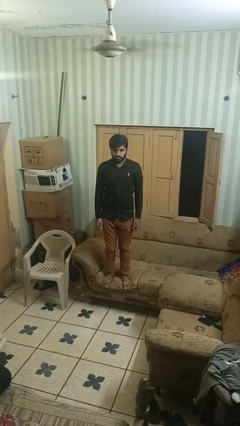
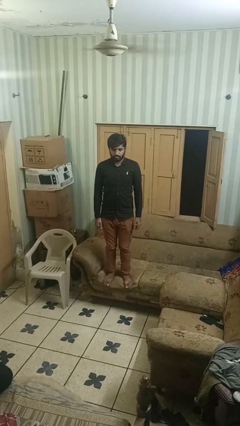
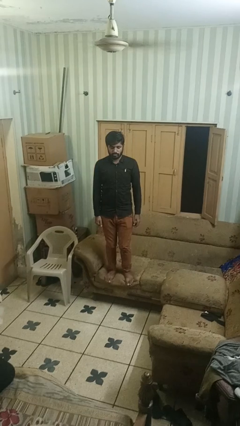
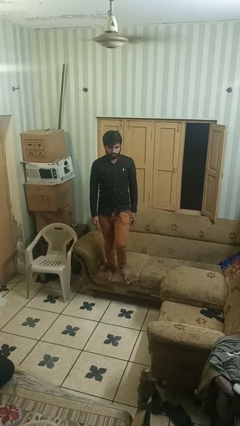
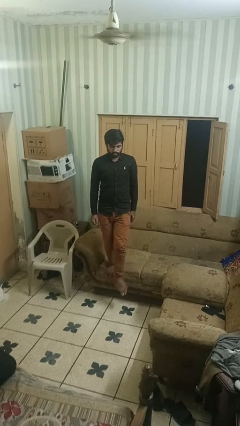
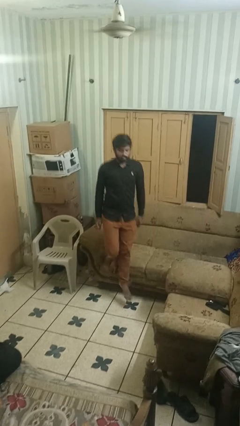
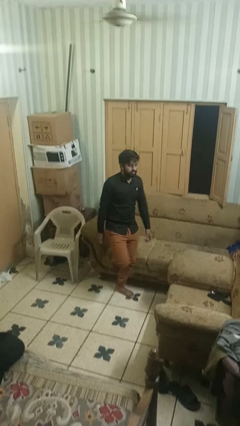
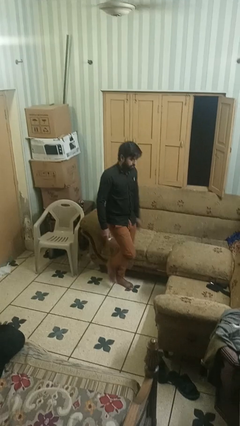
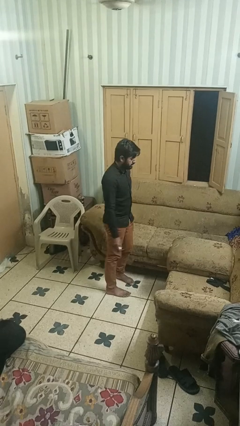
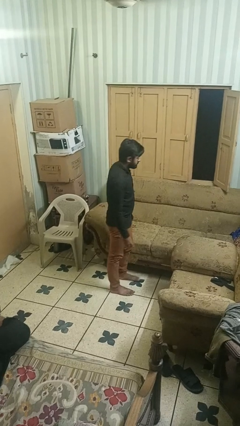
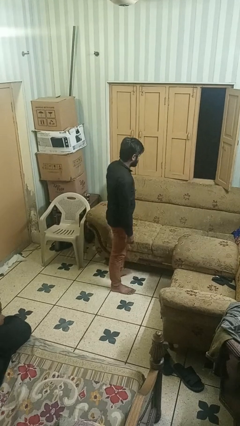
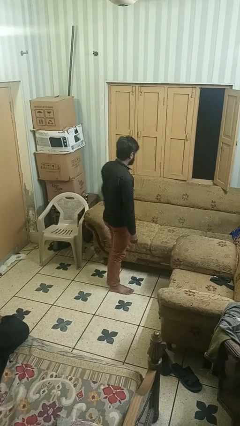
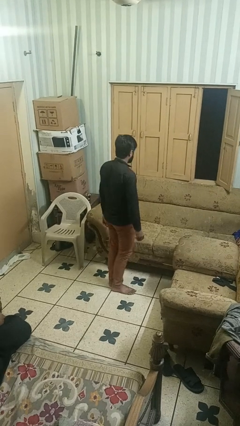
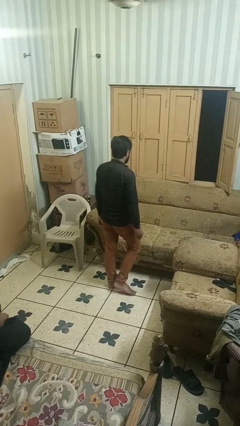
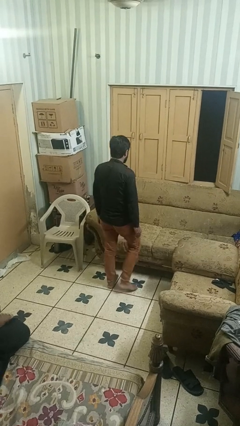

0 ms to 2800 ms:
person climbs off couch

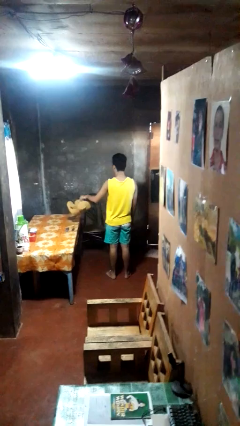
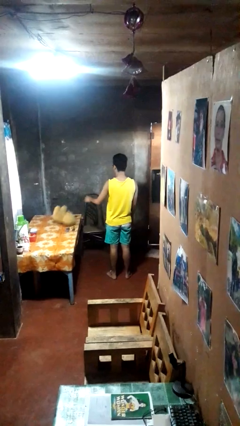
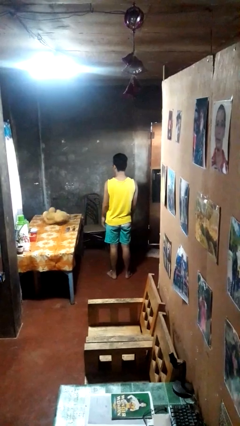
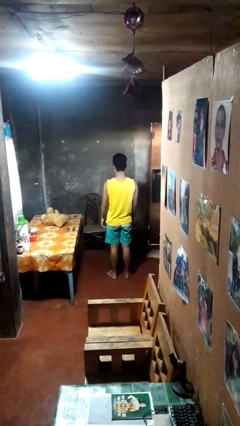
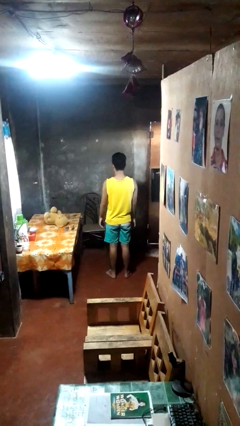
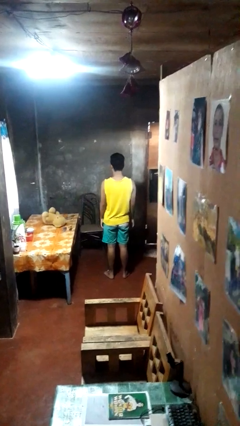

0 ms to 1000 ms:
person throws object on table

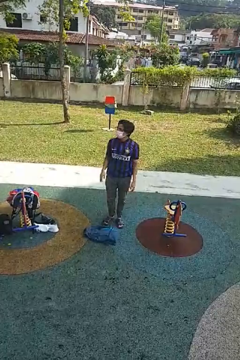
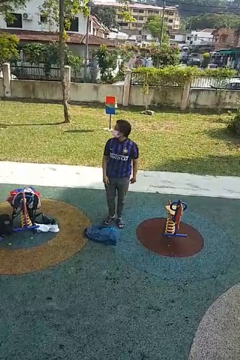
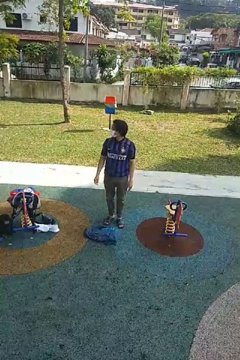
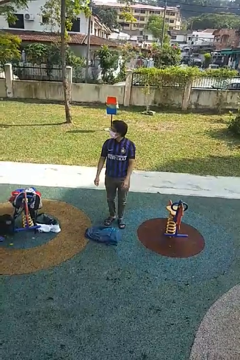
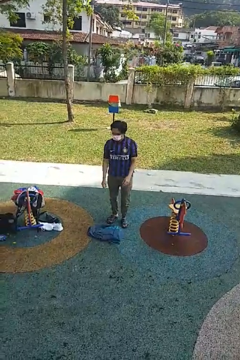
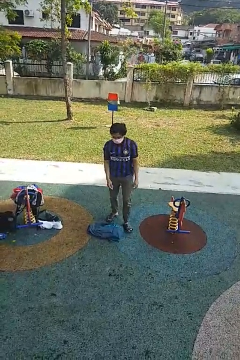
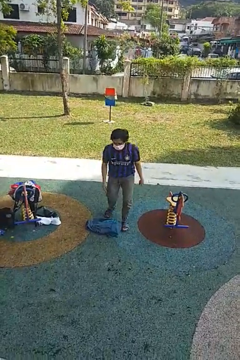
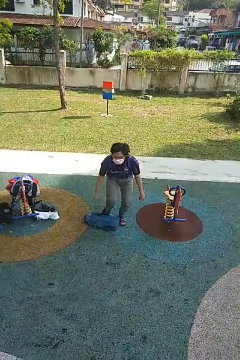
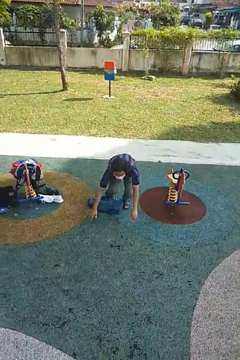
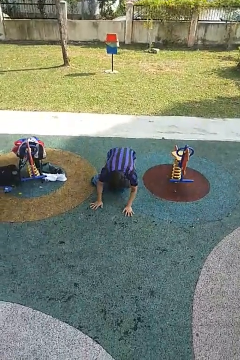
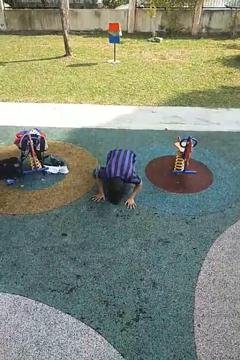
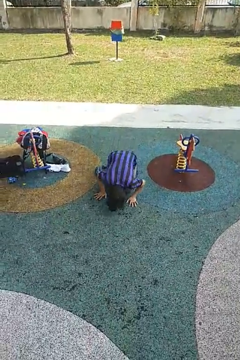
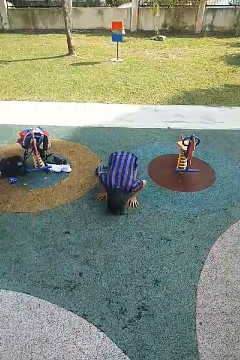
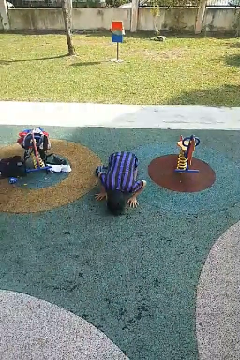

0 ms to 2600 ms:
person trips on object on floor

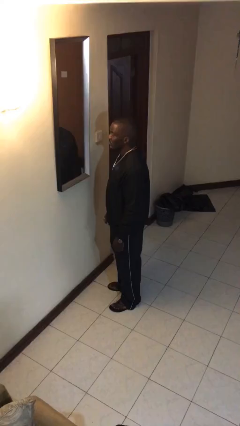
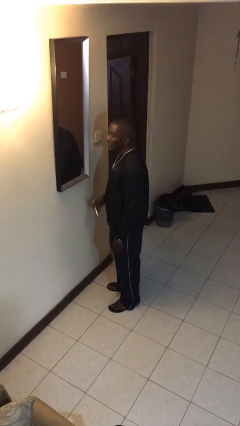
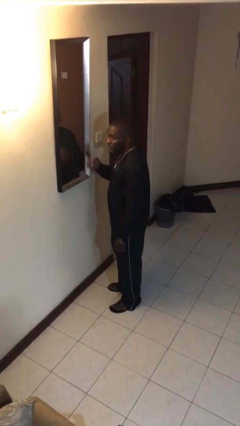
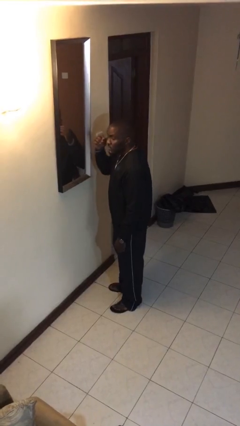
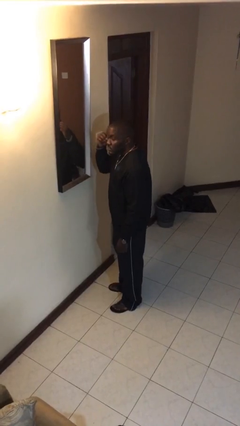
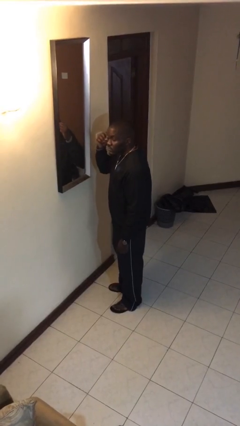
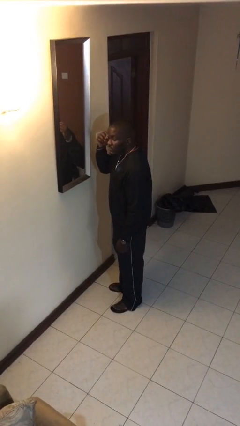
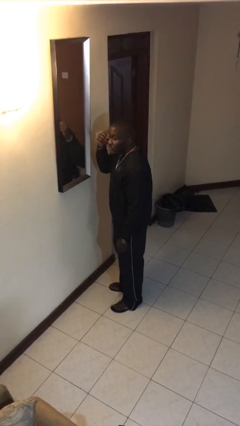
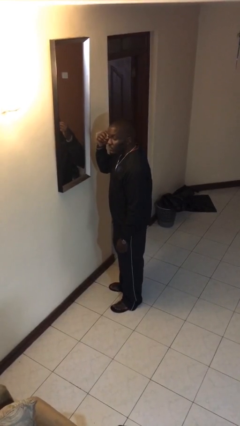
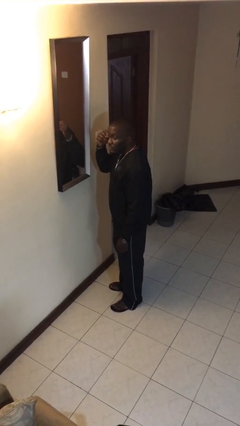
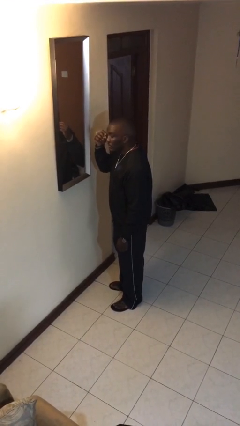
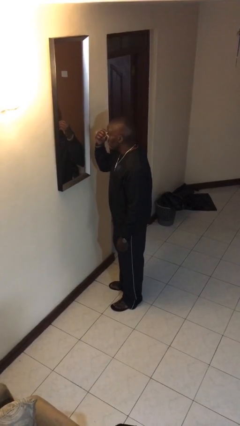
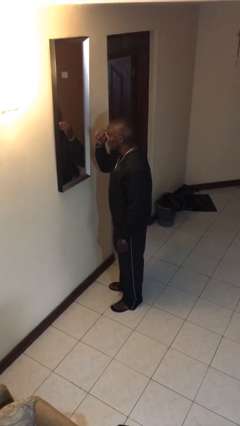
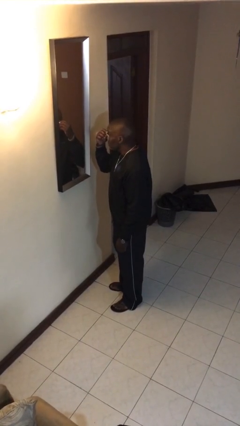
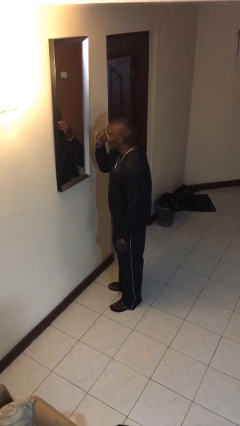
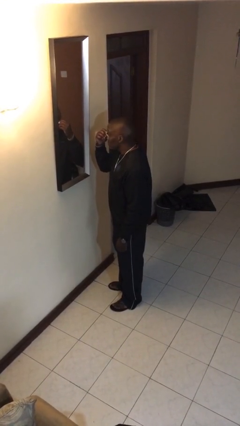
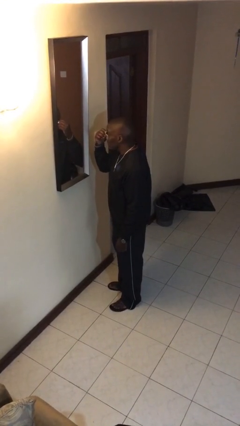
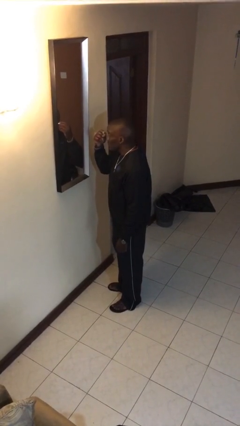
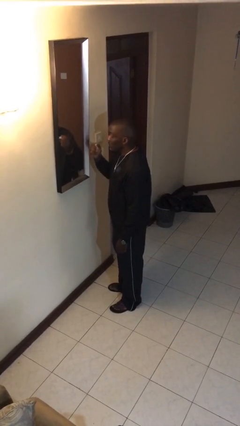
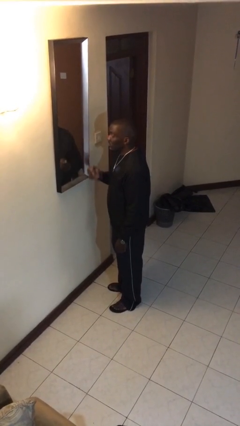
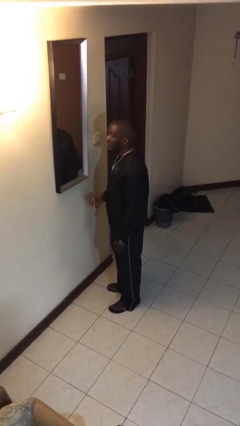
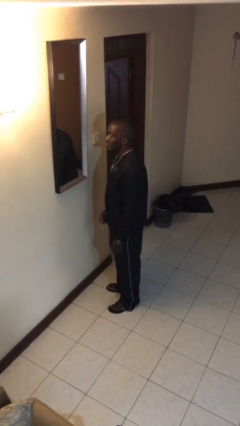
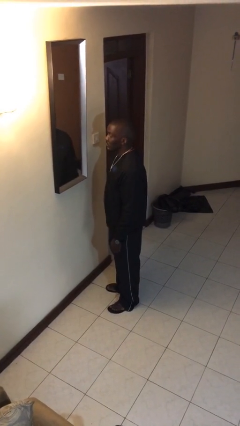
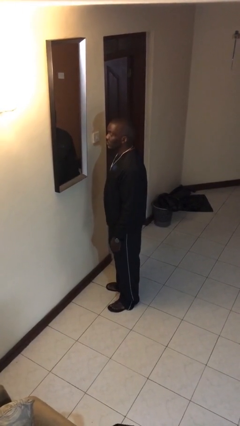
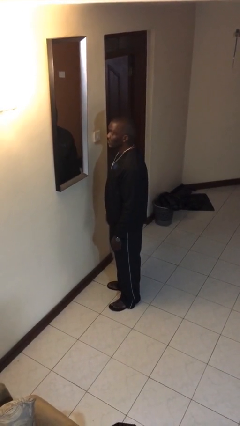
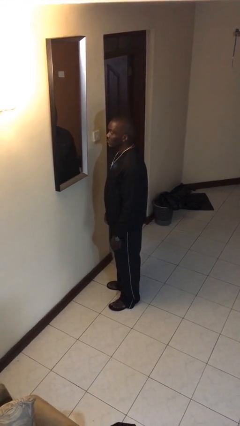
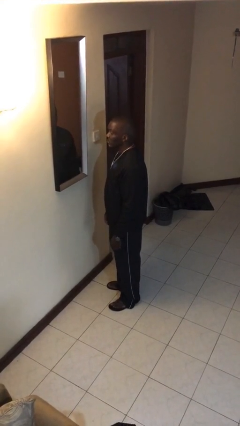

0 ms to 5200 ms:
person applies eye makeup

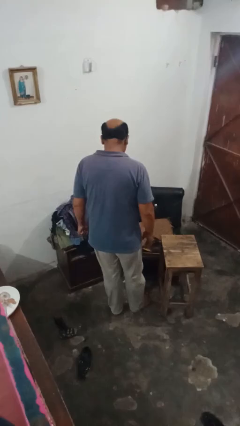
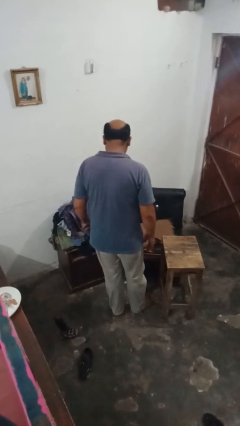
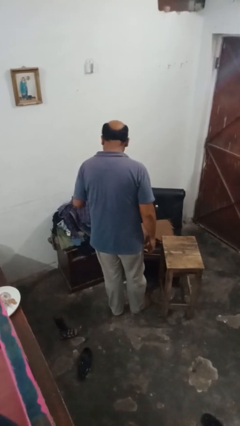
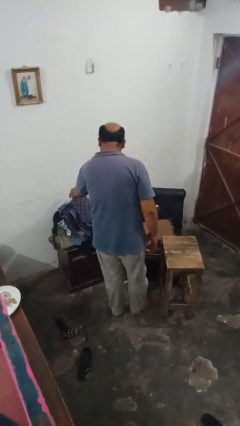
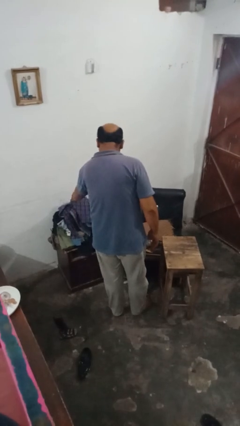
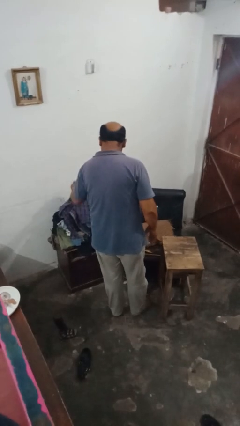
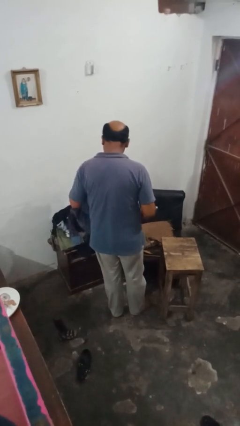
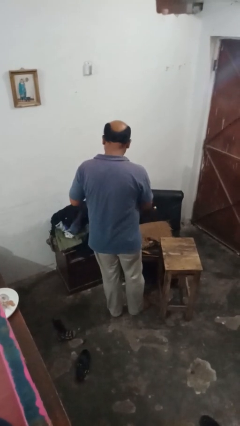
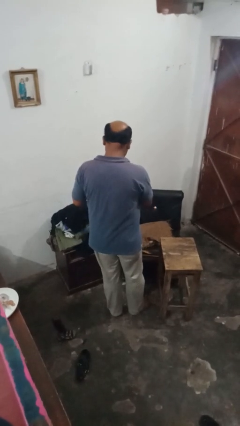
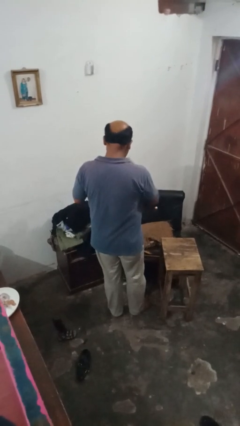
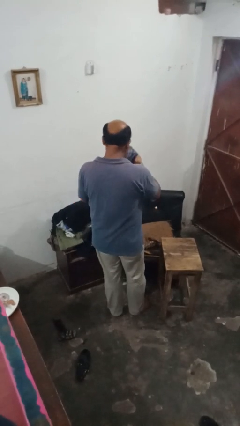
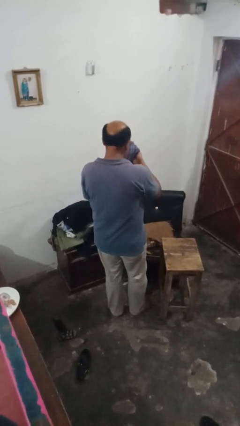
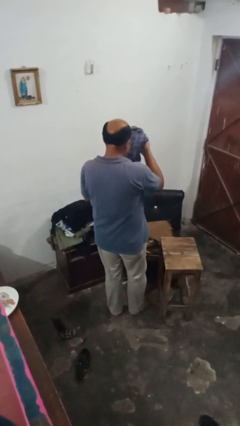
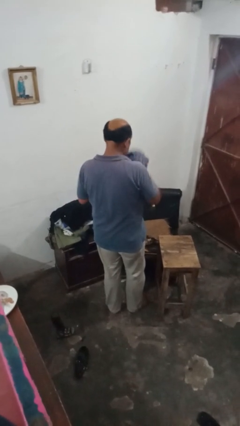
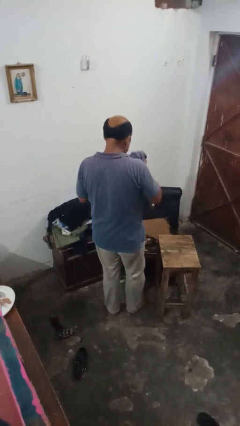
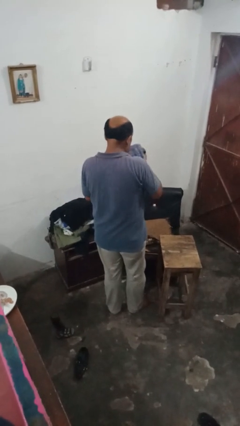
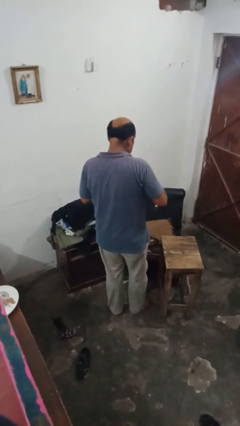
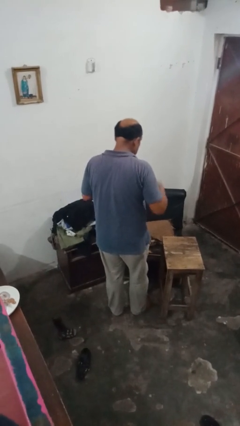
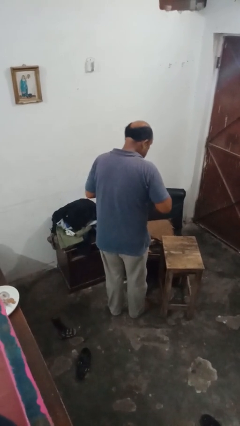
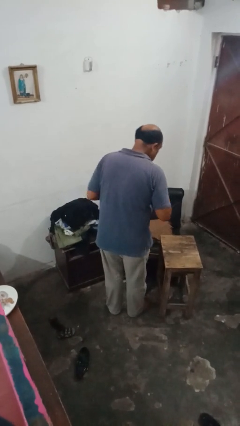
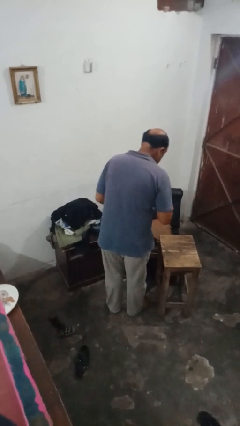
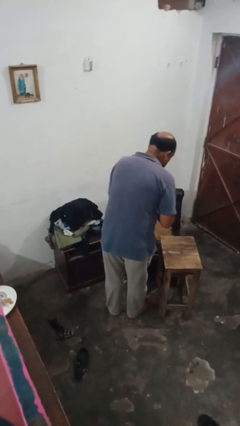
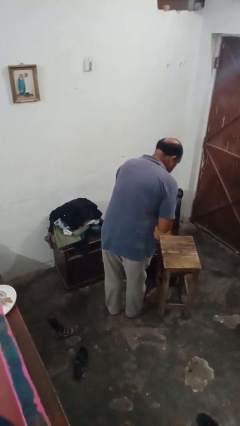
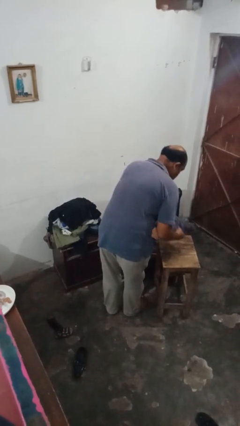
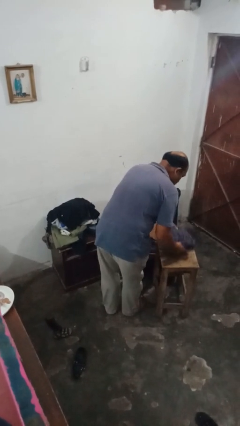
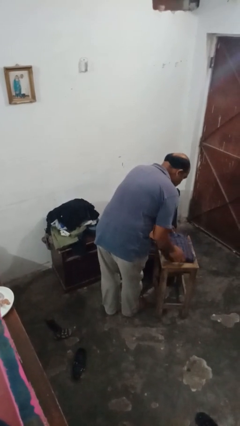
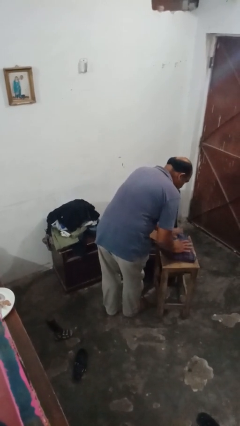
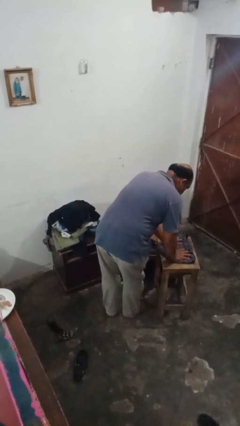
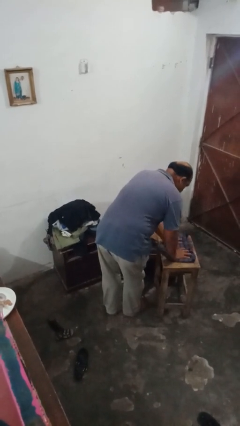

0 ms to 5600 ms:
person folds shirt

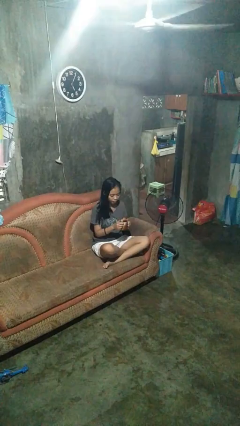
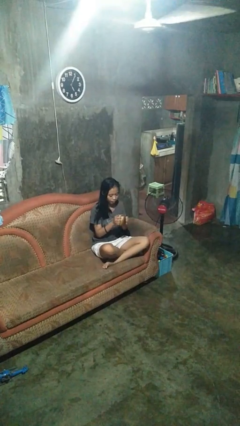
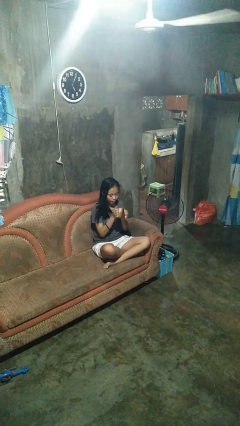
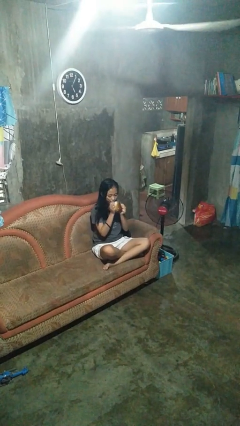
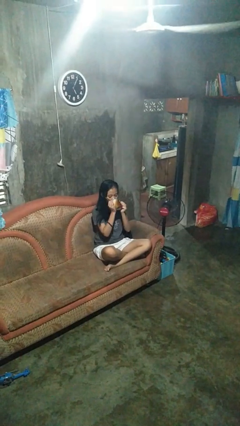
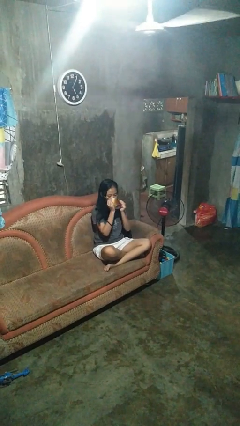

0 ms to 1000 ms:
person drinks from mug
